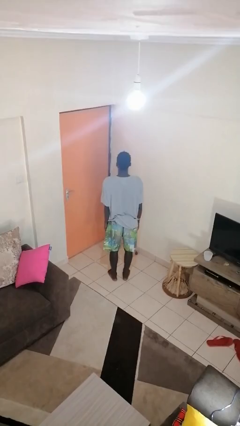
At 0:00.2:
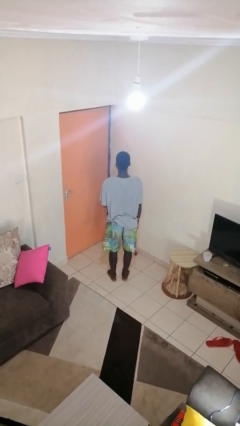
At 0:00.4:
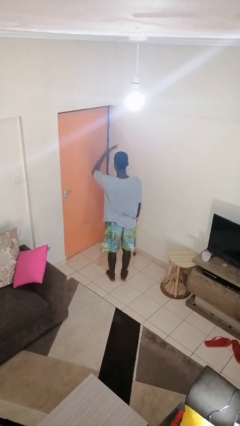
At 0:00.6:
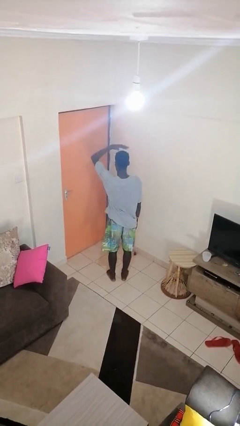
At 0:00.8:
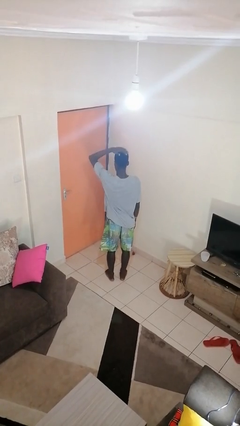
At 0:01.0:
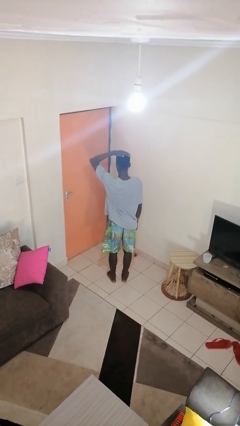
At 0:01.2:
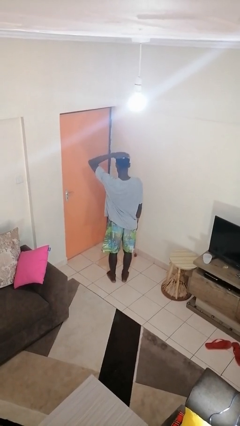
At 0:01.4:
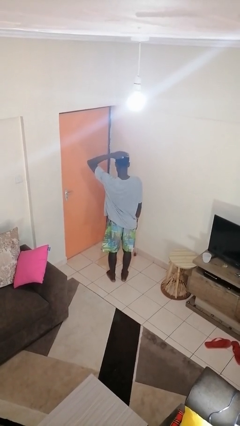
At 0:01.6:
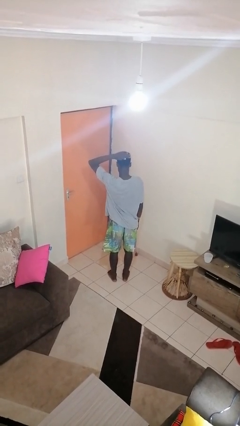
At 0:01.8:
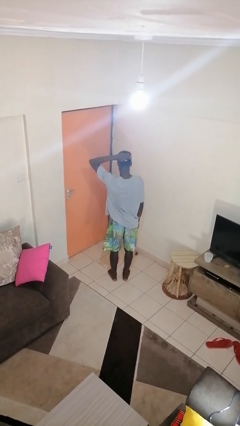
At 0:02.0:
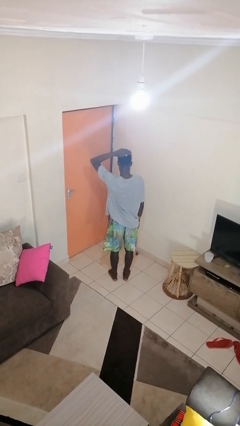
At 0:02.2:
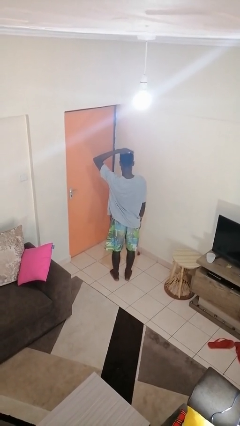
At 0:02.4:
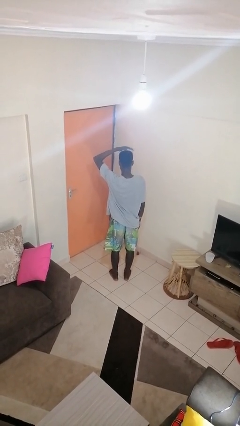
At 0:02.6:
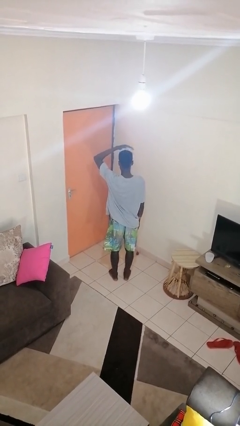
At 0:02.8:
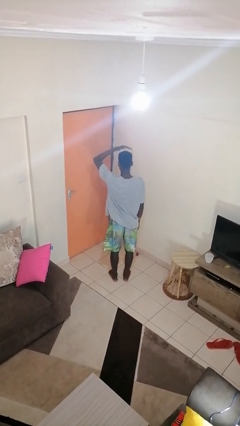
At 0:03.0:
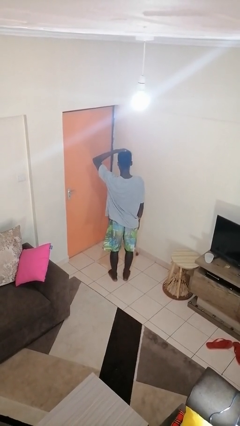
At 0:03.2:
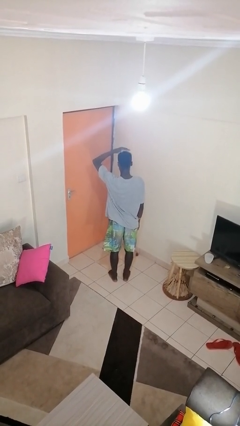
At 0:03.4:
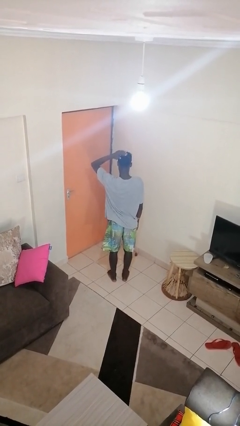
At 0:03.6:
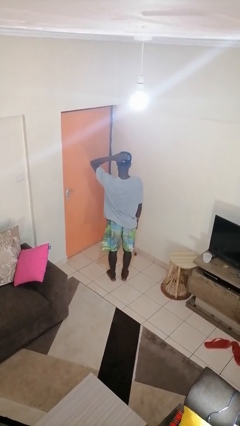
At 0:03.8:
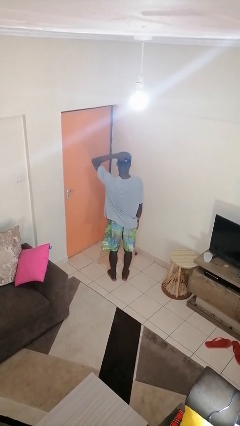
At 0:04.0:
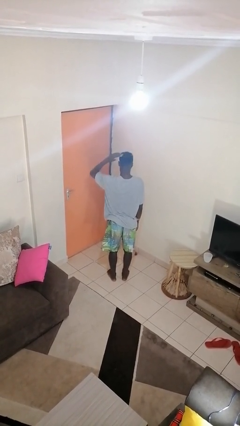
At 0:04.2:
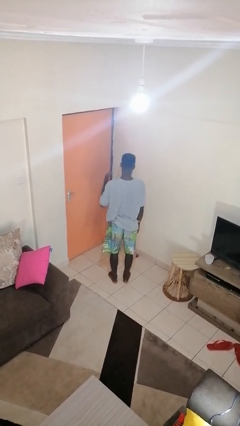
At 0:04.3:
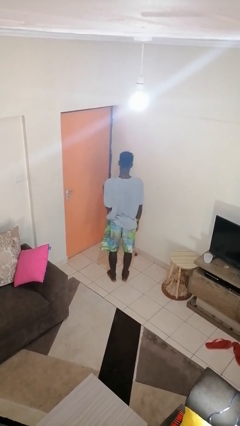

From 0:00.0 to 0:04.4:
person pats head

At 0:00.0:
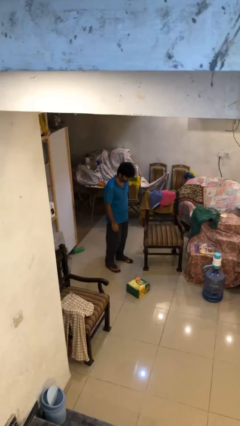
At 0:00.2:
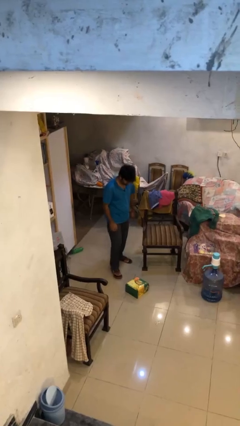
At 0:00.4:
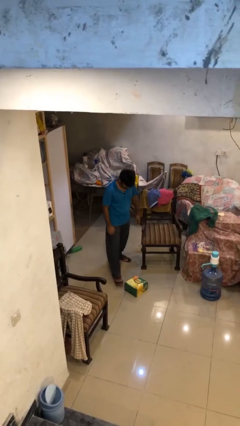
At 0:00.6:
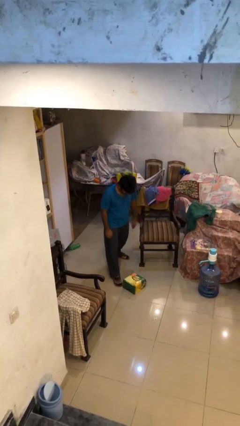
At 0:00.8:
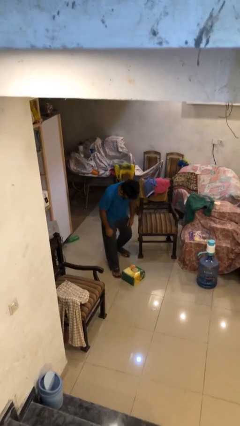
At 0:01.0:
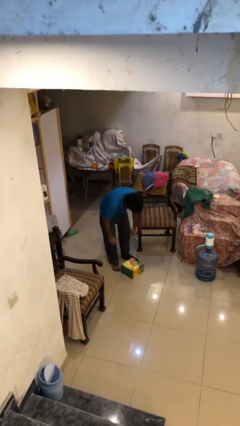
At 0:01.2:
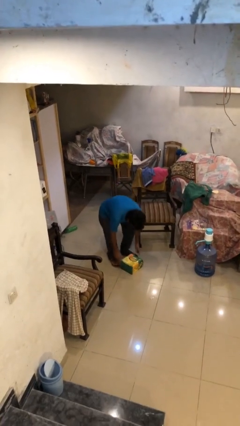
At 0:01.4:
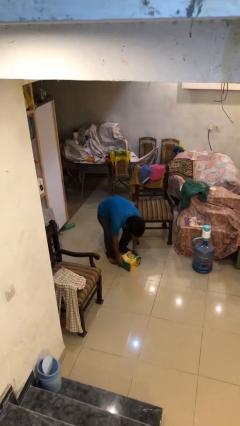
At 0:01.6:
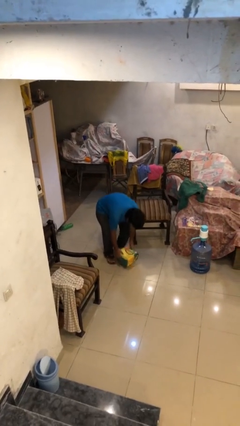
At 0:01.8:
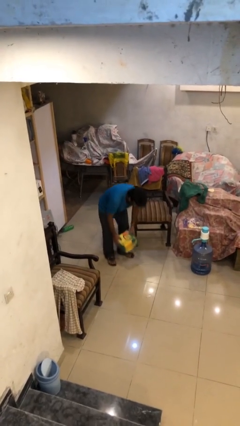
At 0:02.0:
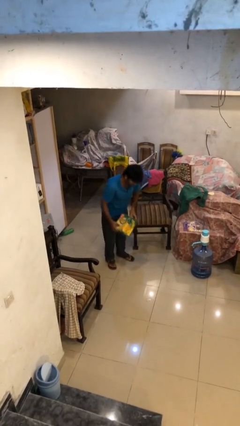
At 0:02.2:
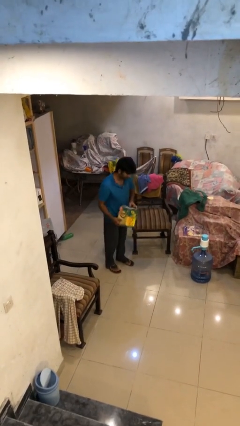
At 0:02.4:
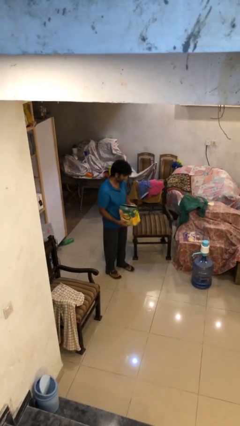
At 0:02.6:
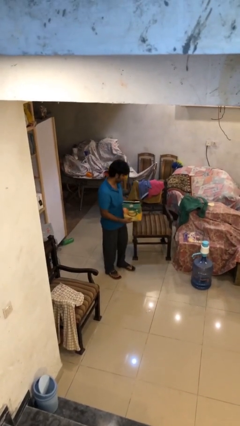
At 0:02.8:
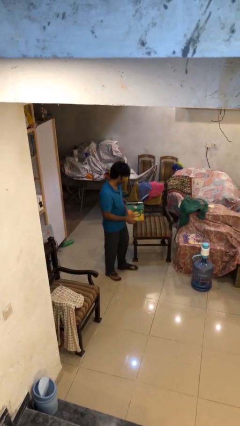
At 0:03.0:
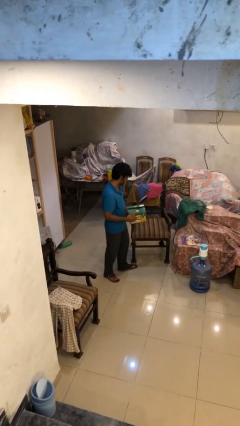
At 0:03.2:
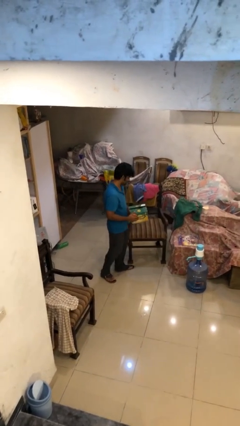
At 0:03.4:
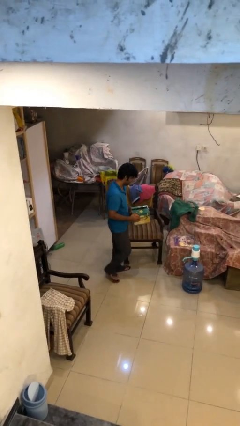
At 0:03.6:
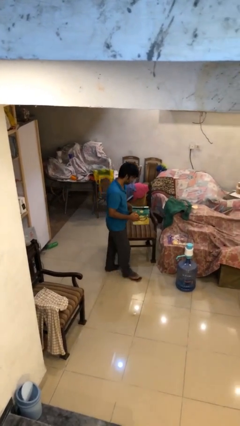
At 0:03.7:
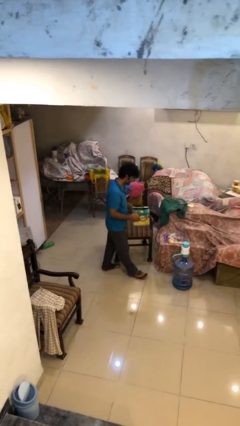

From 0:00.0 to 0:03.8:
person picks up object from floor

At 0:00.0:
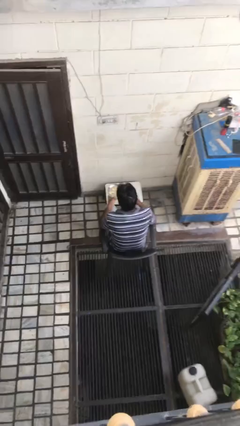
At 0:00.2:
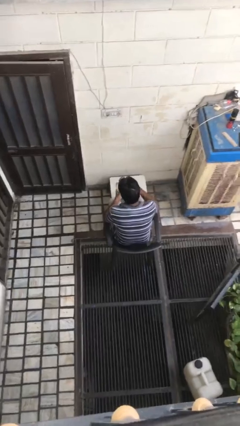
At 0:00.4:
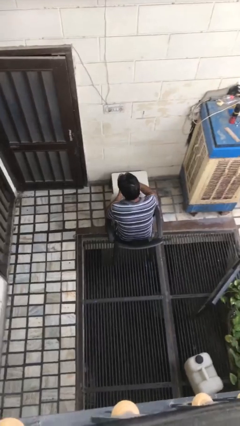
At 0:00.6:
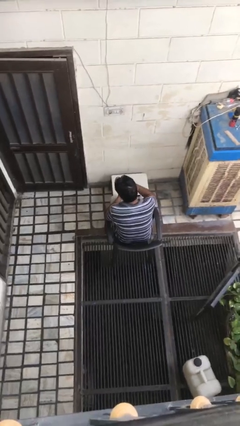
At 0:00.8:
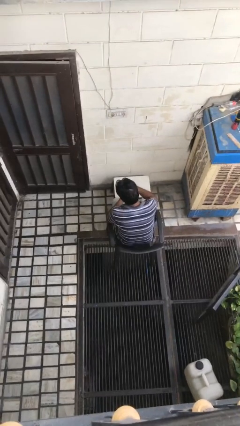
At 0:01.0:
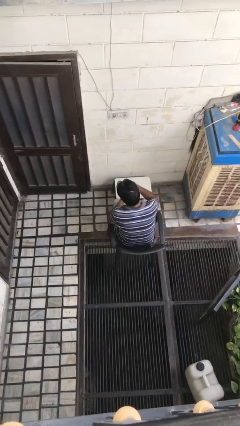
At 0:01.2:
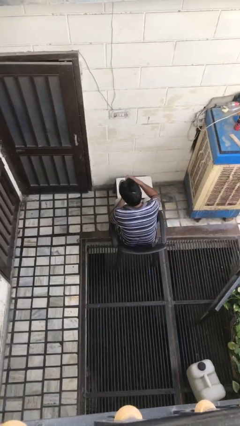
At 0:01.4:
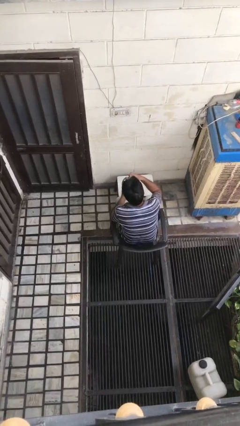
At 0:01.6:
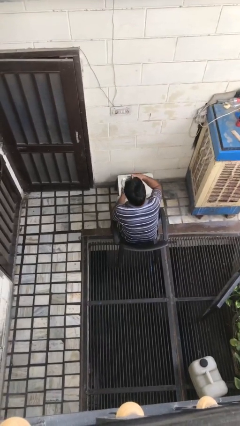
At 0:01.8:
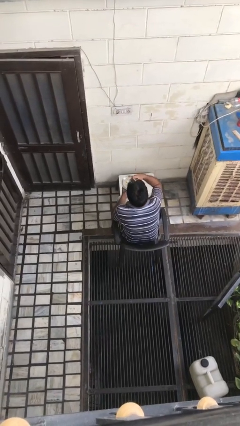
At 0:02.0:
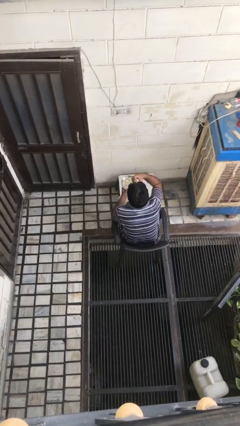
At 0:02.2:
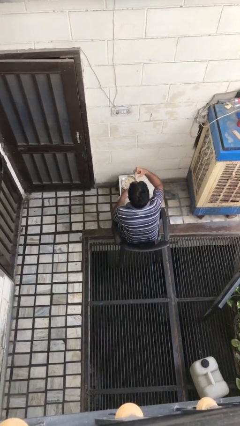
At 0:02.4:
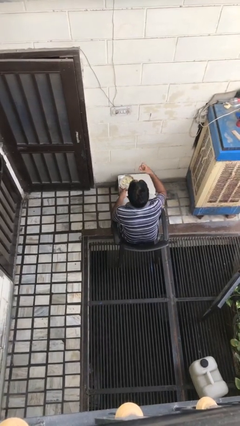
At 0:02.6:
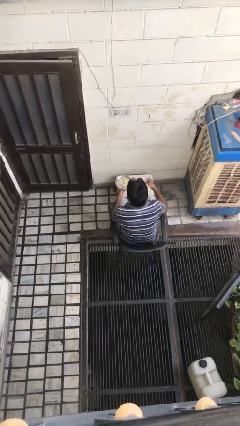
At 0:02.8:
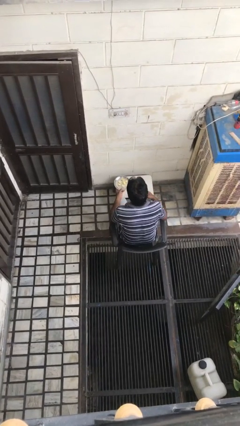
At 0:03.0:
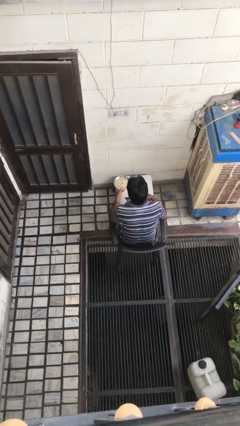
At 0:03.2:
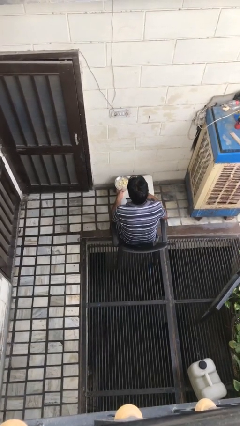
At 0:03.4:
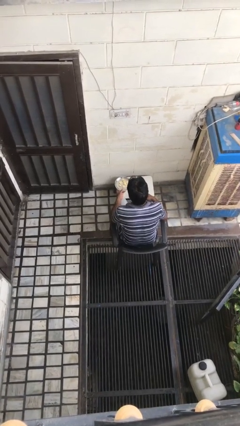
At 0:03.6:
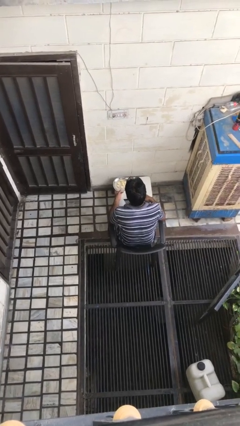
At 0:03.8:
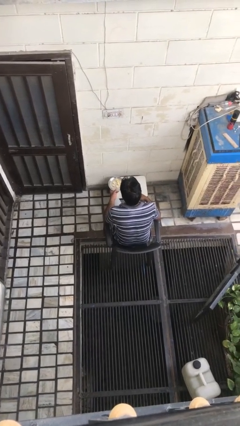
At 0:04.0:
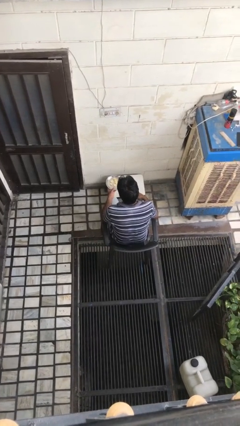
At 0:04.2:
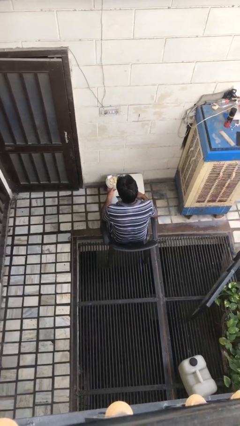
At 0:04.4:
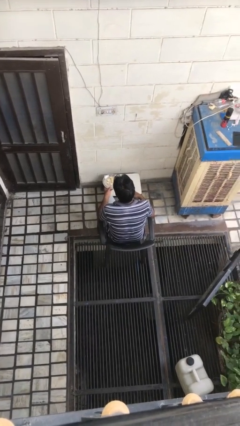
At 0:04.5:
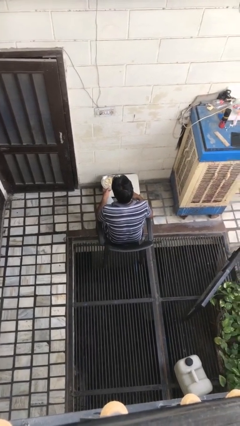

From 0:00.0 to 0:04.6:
person eats with hands

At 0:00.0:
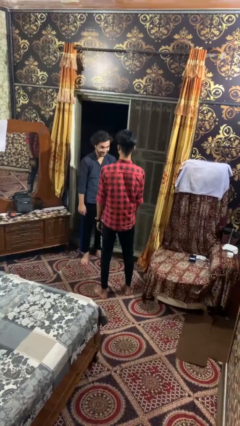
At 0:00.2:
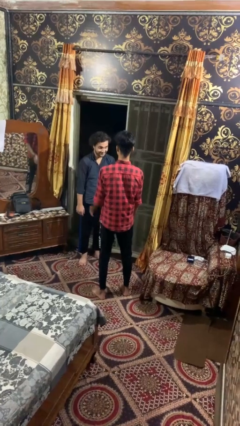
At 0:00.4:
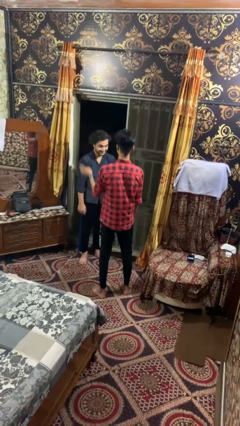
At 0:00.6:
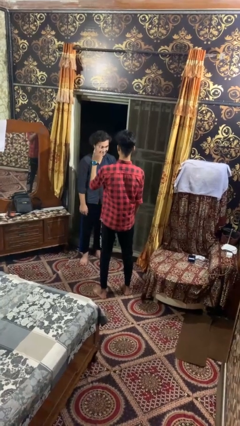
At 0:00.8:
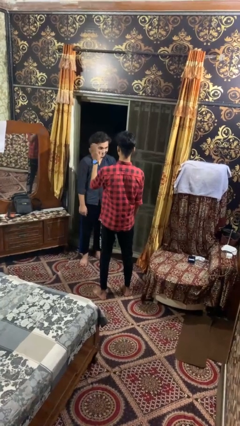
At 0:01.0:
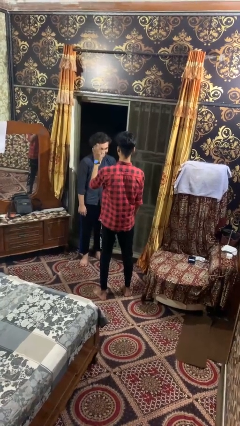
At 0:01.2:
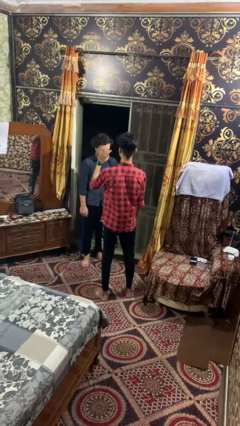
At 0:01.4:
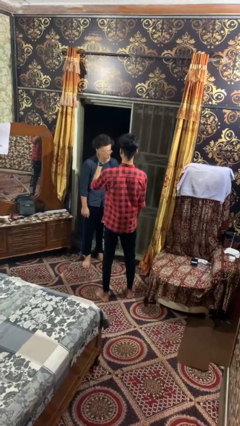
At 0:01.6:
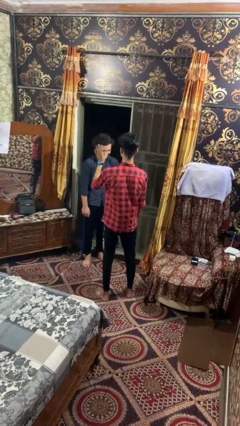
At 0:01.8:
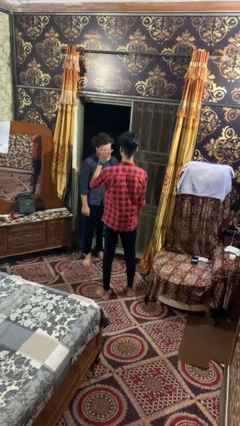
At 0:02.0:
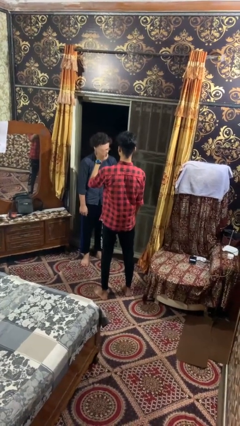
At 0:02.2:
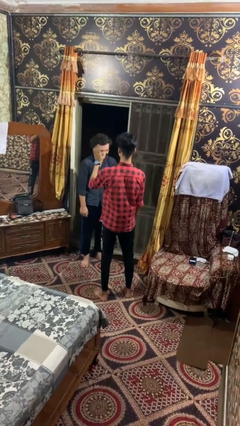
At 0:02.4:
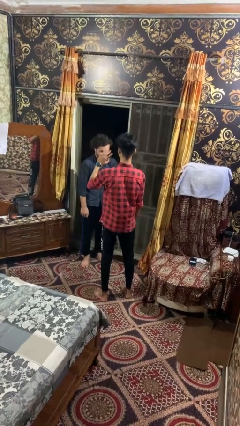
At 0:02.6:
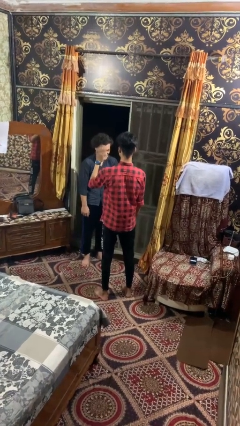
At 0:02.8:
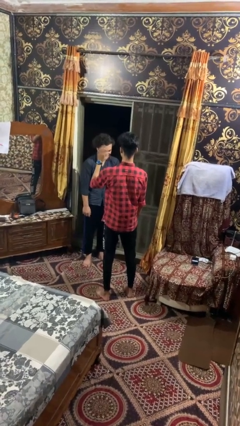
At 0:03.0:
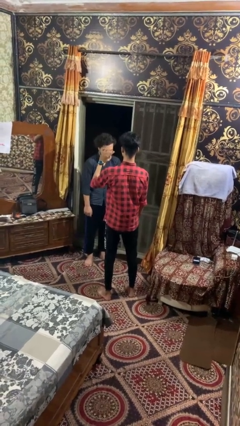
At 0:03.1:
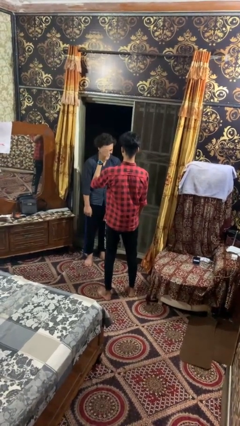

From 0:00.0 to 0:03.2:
person waves at person

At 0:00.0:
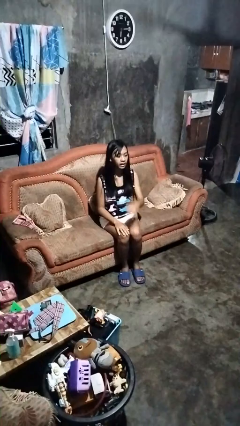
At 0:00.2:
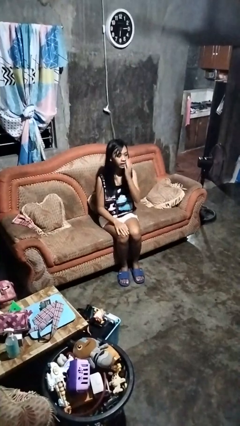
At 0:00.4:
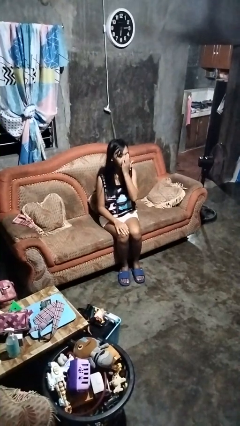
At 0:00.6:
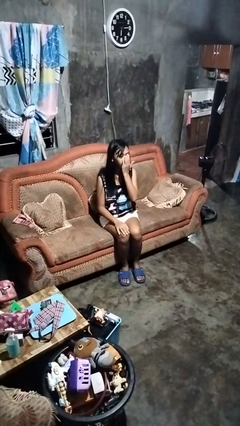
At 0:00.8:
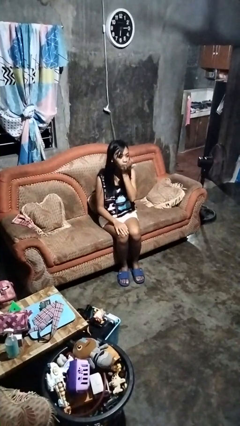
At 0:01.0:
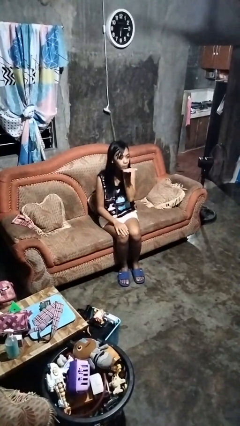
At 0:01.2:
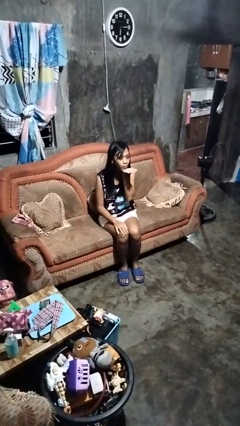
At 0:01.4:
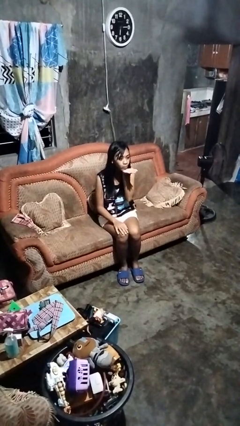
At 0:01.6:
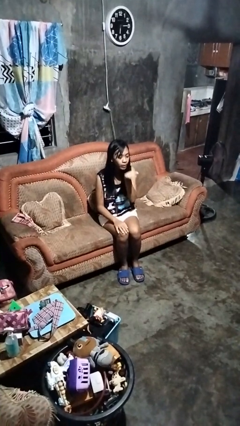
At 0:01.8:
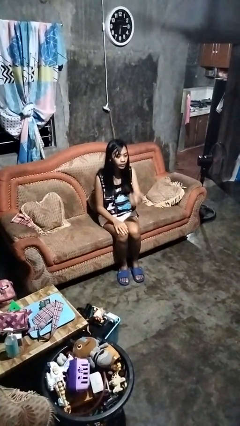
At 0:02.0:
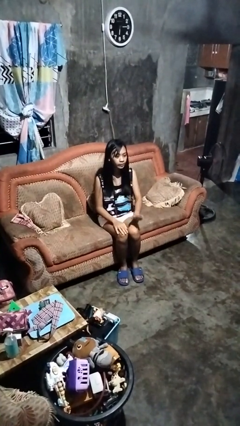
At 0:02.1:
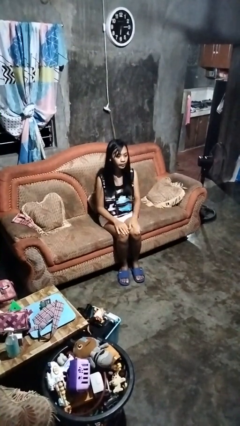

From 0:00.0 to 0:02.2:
person gestures blow kiss
